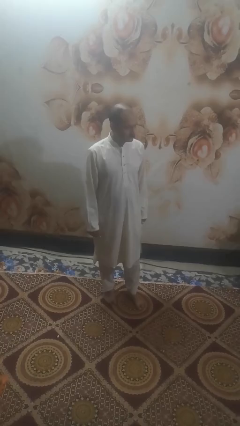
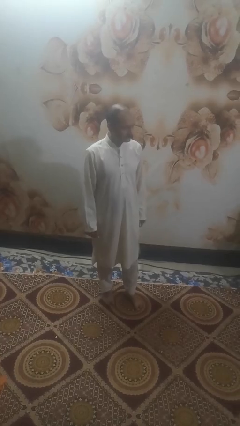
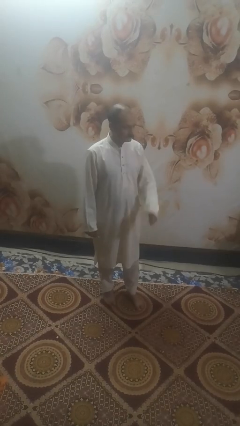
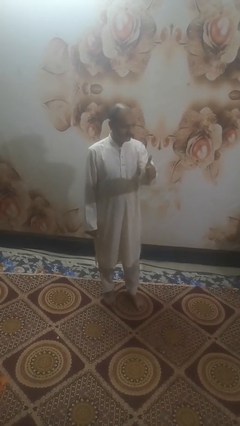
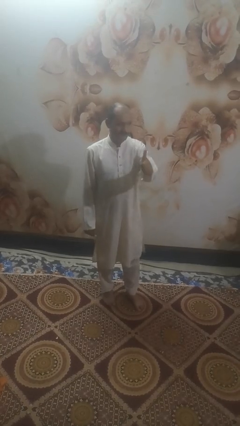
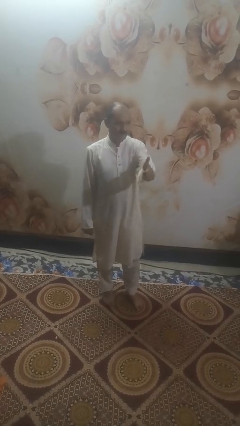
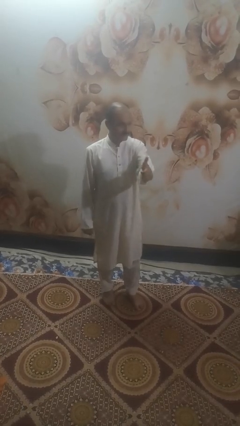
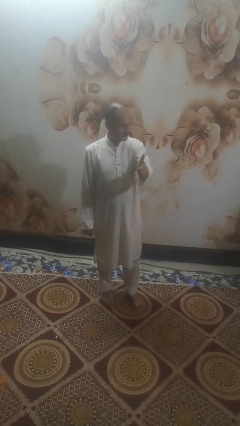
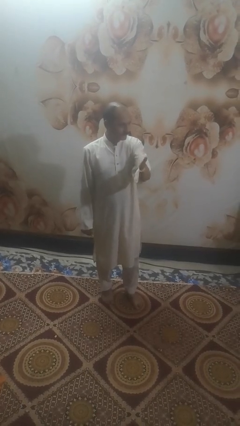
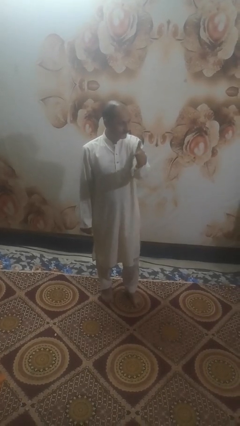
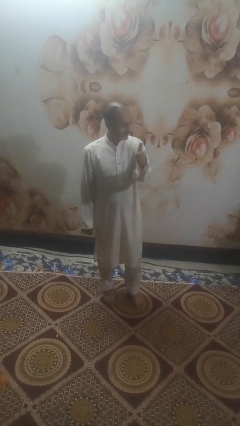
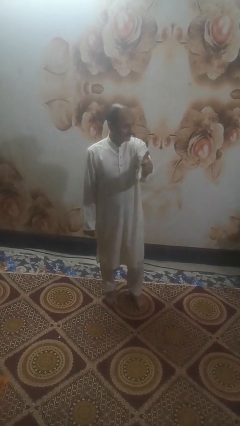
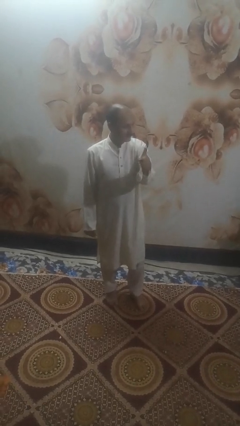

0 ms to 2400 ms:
person gestures thumbs up

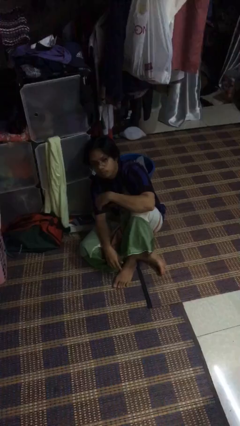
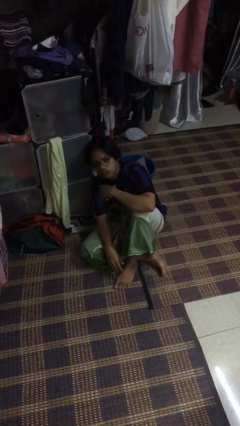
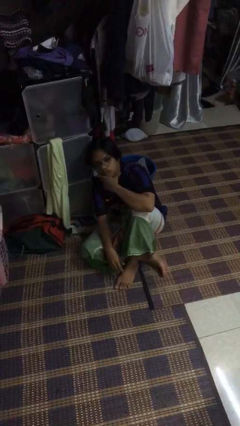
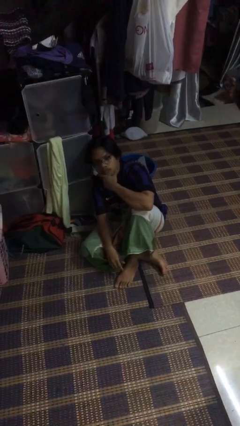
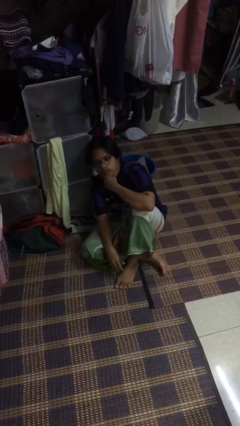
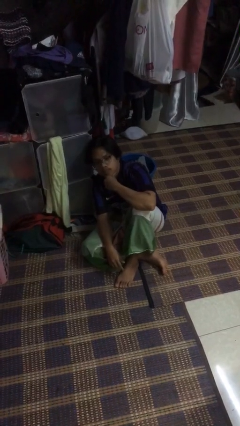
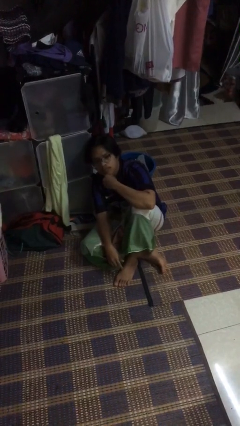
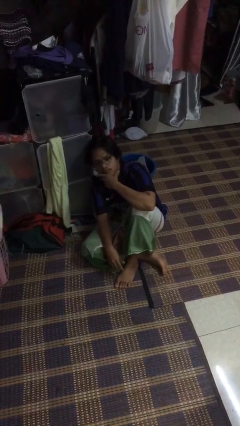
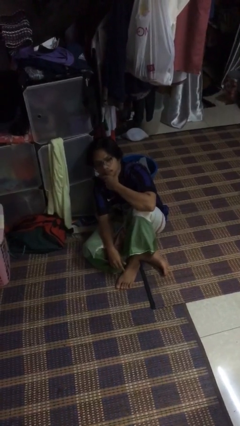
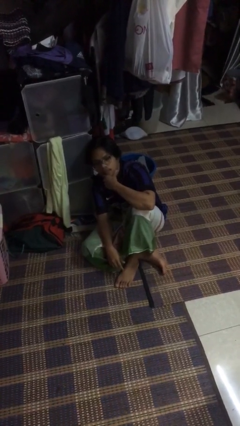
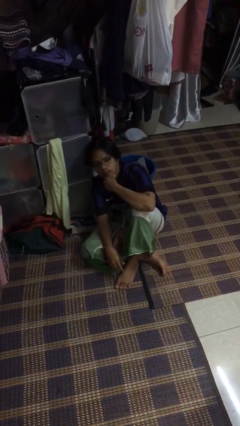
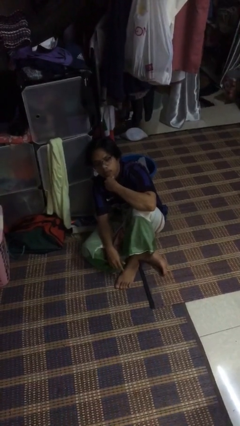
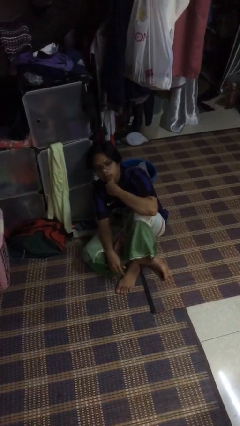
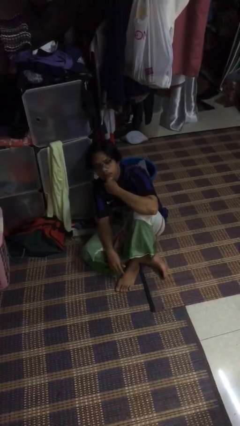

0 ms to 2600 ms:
person strokes chin

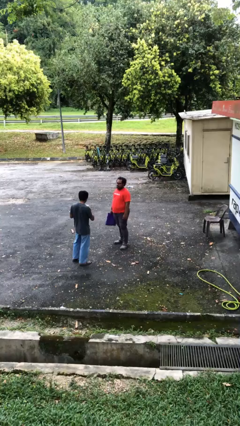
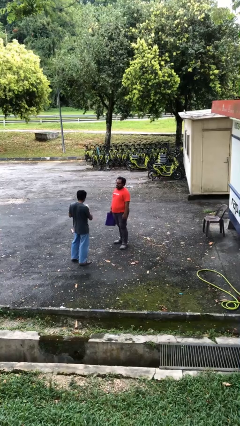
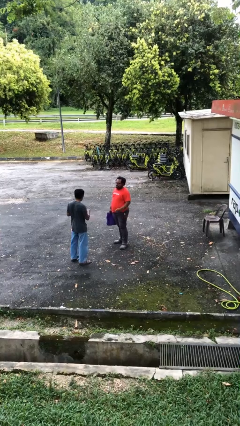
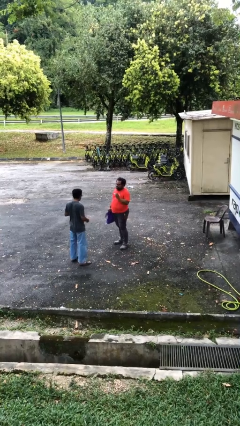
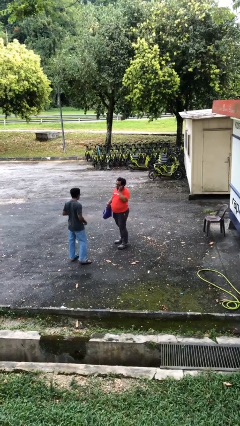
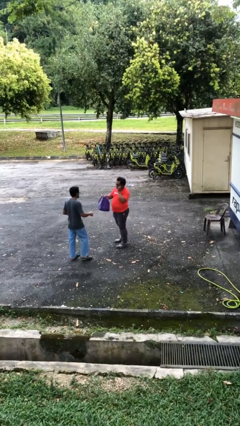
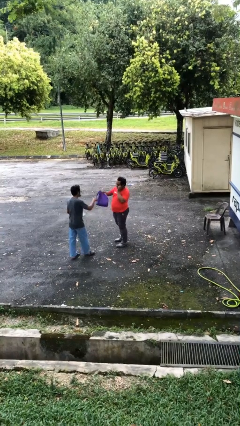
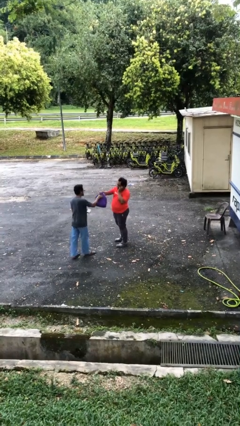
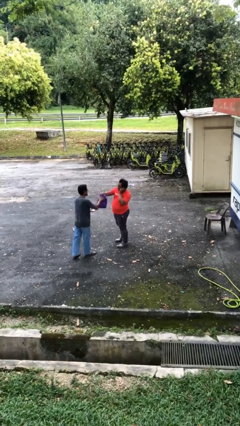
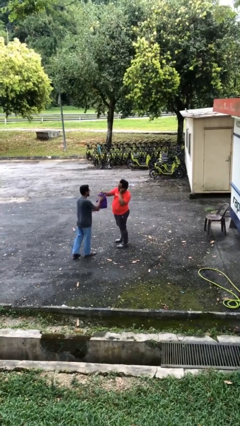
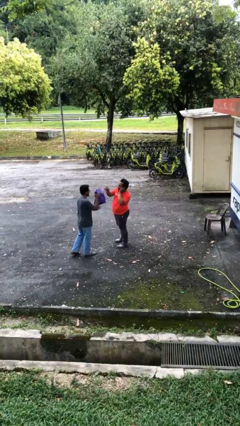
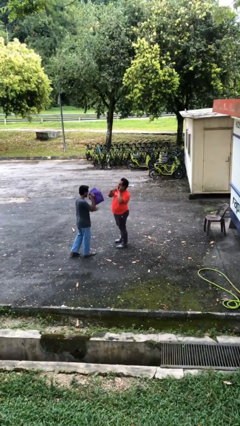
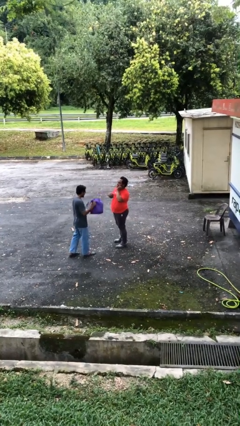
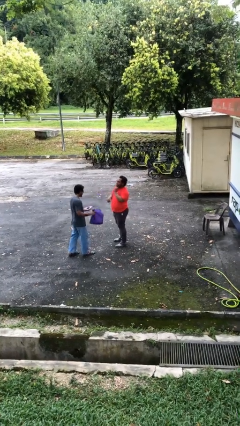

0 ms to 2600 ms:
person transfers object to person

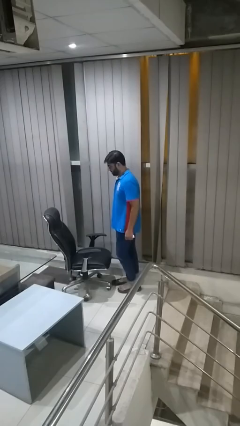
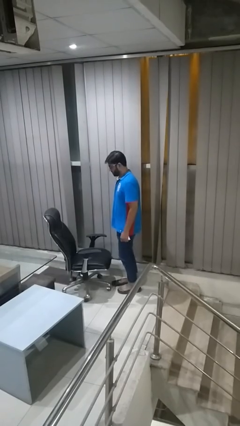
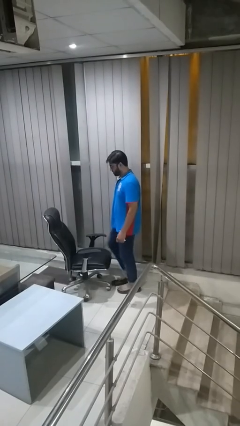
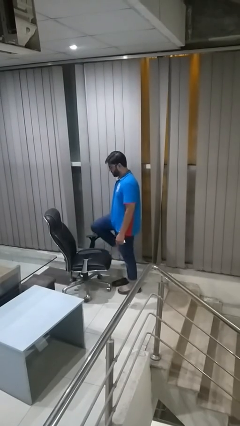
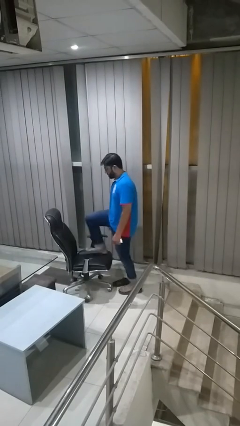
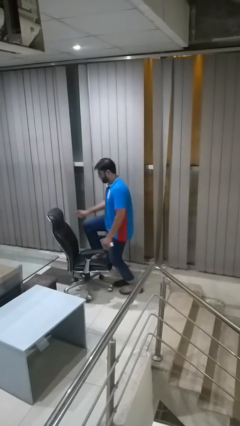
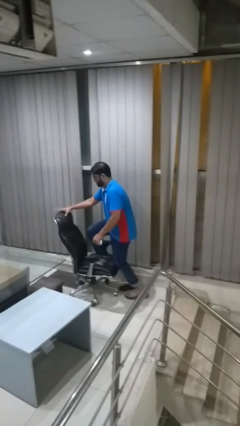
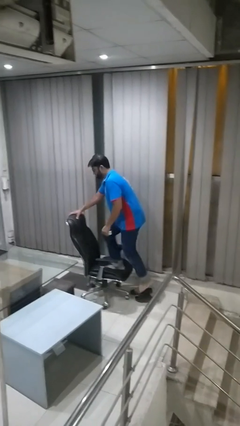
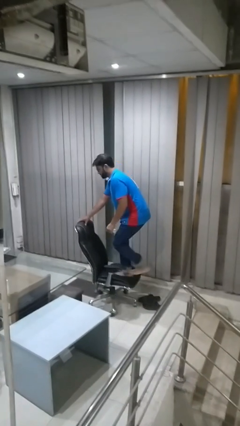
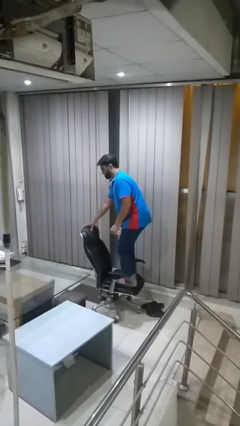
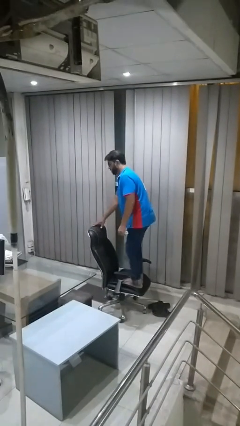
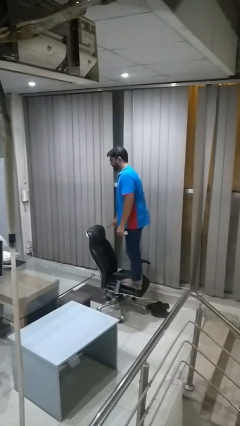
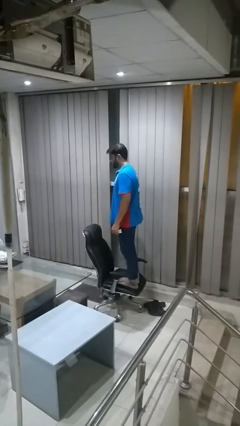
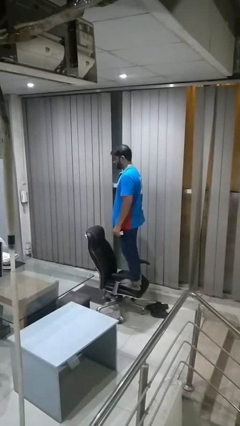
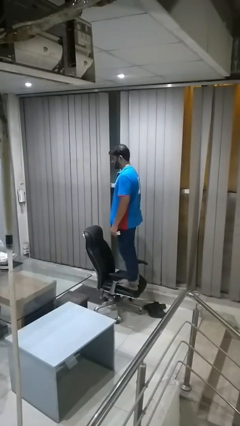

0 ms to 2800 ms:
person climbs on chair

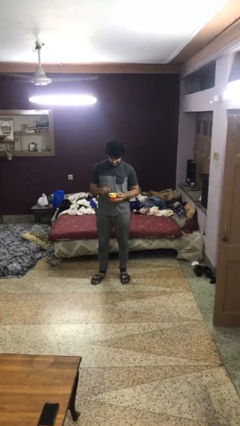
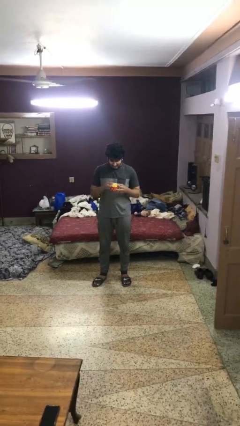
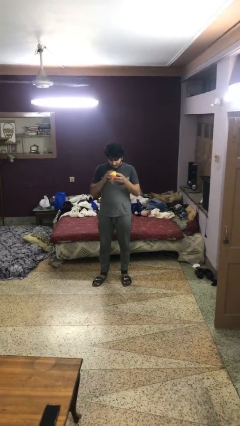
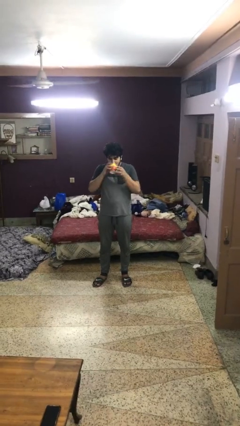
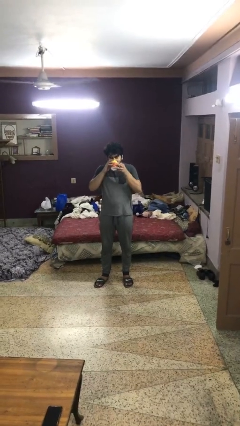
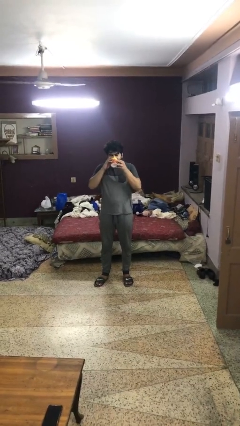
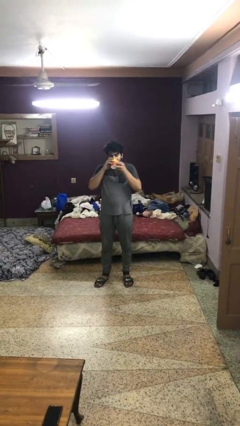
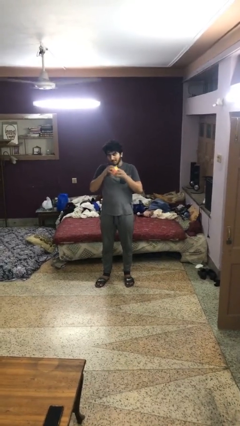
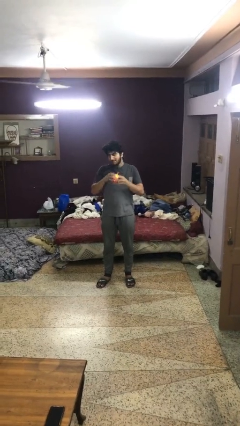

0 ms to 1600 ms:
person drinks from mug

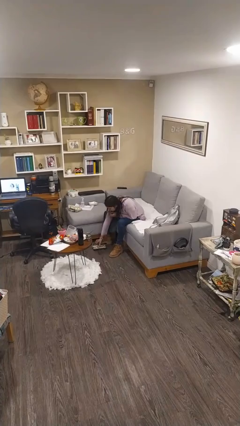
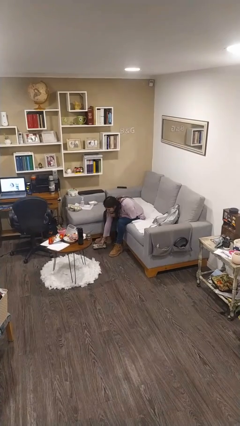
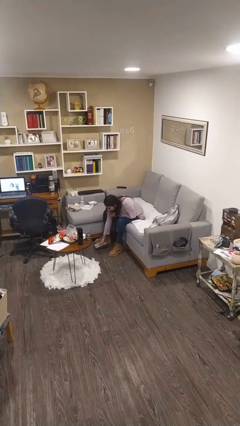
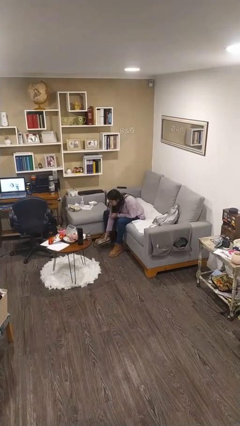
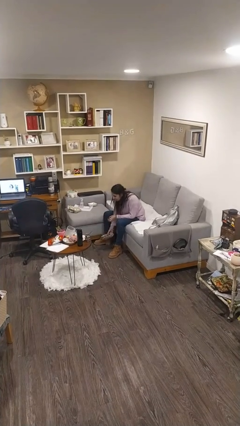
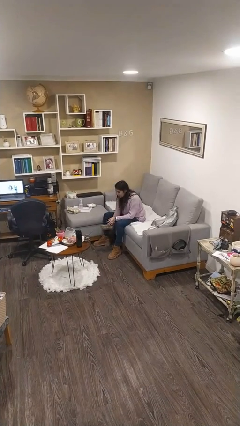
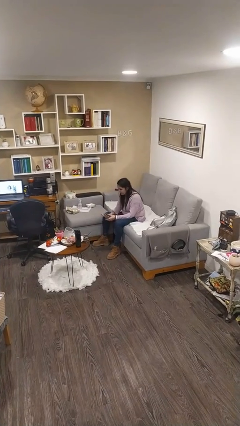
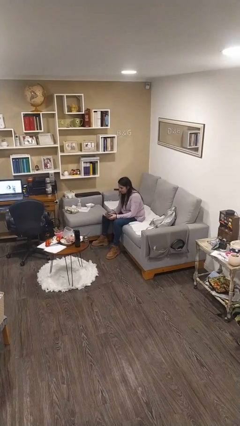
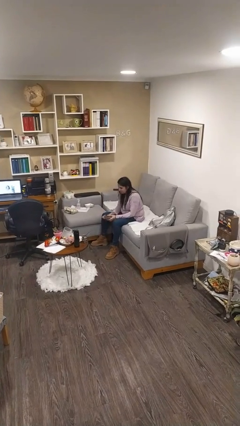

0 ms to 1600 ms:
person picks up object from floor

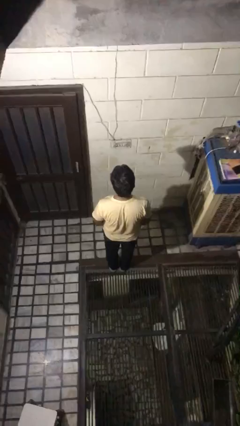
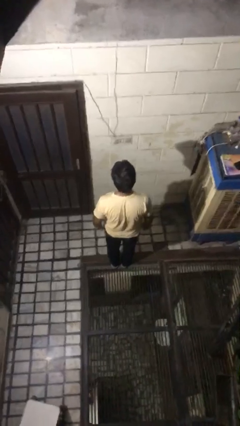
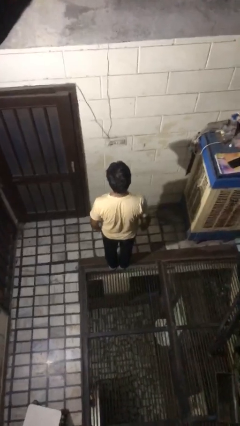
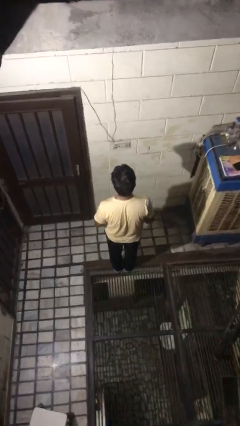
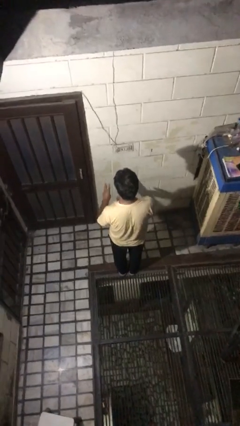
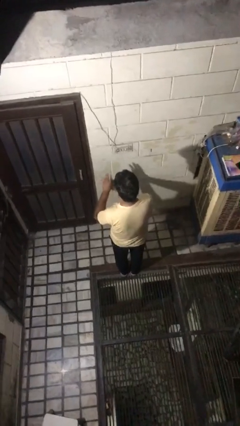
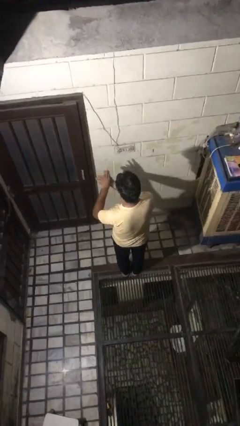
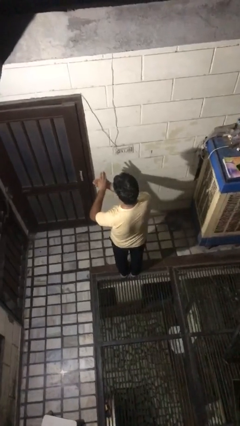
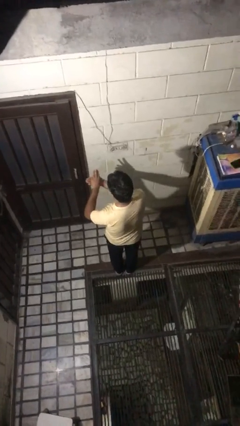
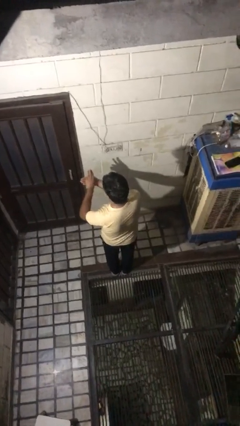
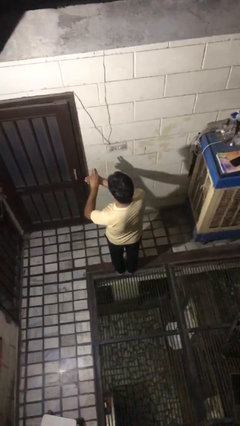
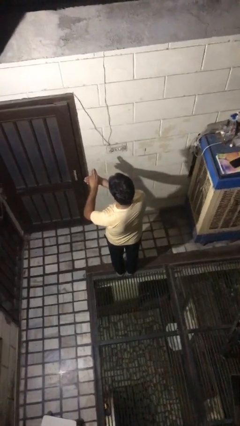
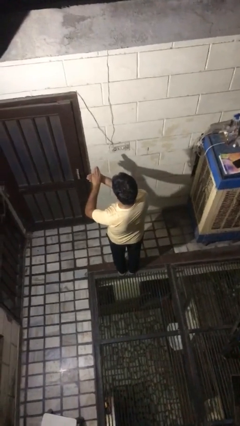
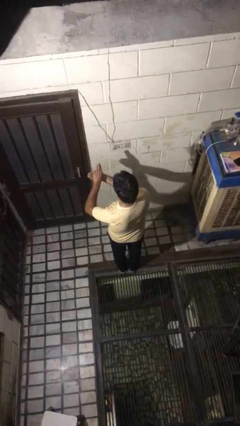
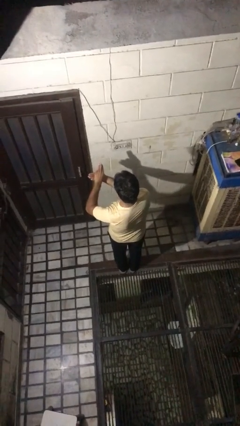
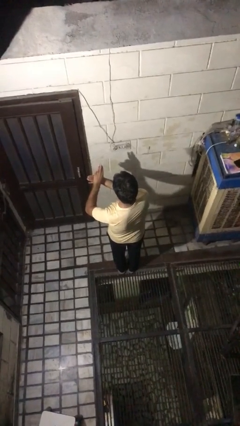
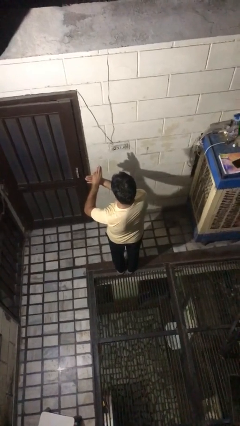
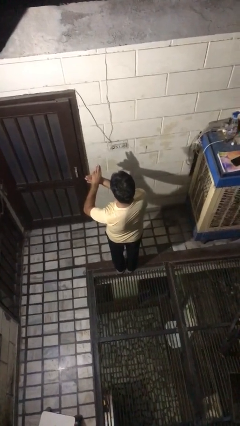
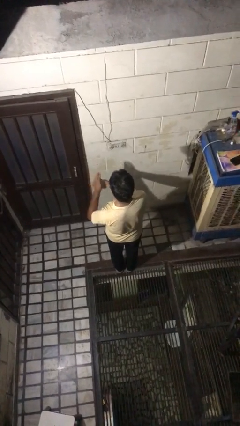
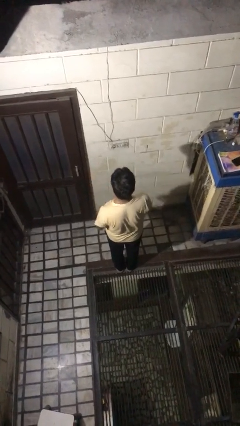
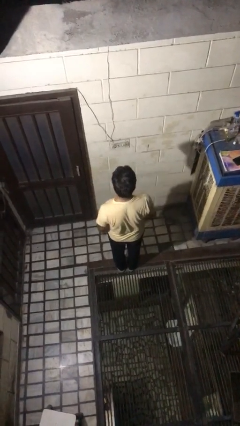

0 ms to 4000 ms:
person gestures number three
